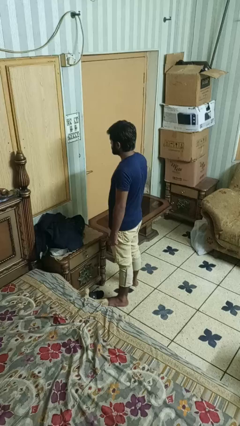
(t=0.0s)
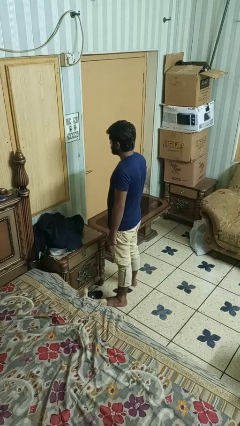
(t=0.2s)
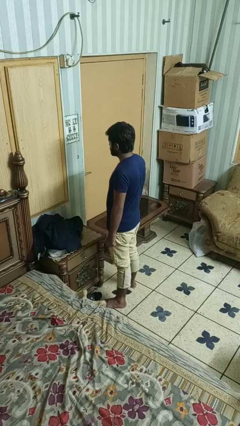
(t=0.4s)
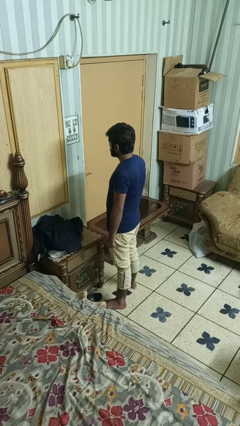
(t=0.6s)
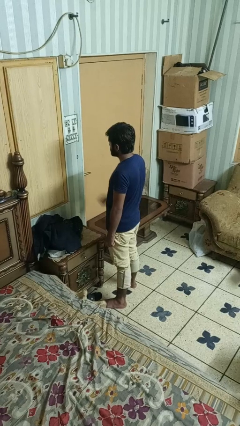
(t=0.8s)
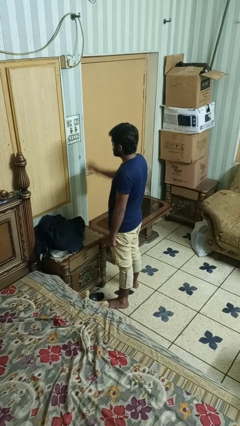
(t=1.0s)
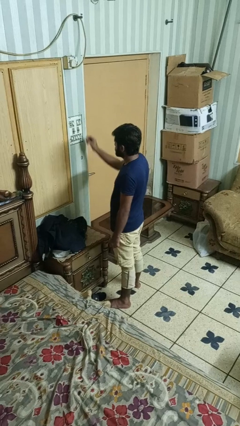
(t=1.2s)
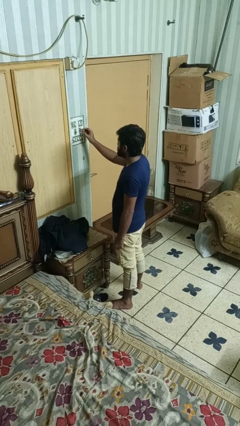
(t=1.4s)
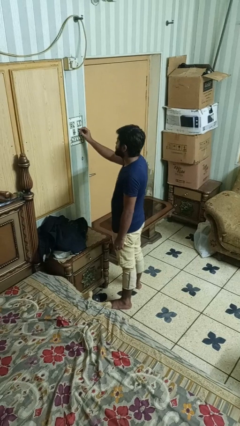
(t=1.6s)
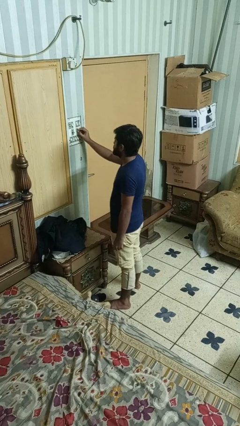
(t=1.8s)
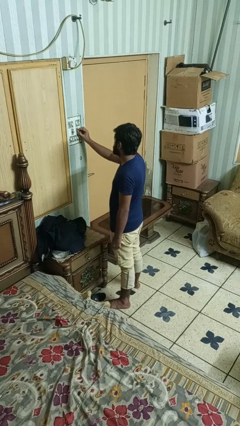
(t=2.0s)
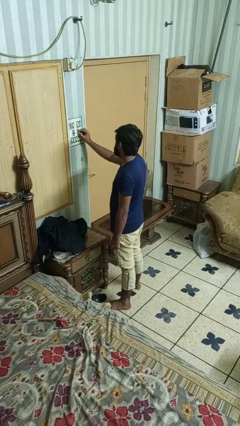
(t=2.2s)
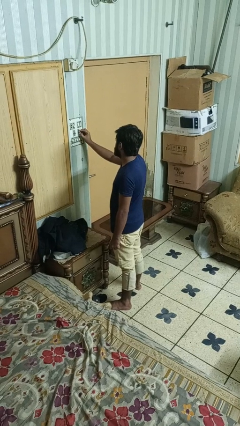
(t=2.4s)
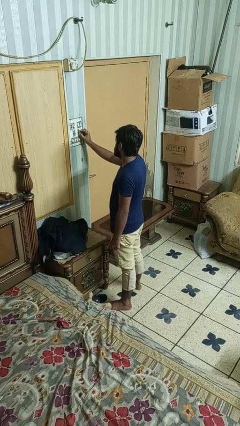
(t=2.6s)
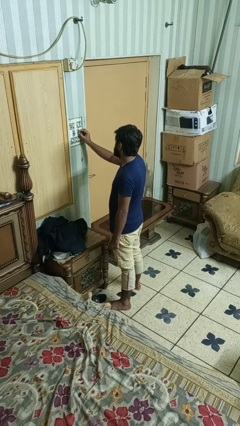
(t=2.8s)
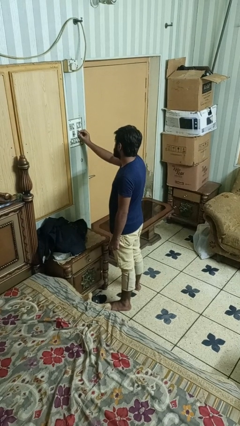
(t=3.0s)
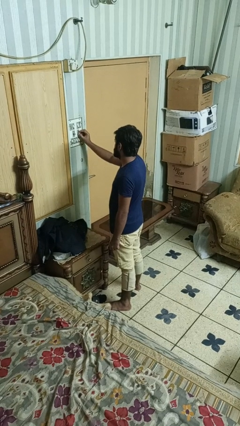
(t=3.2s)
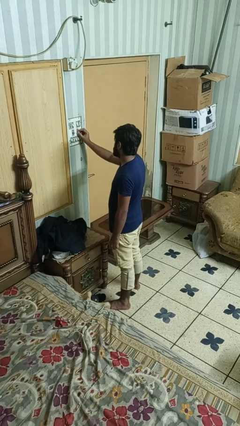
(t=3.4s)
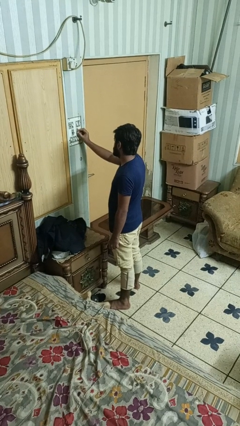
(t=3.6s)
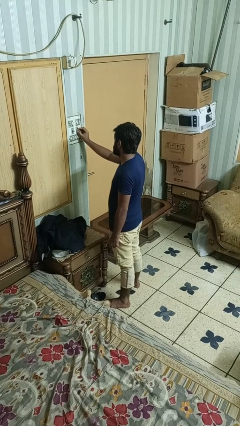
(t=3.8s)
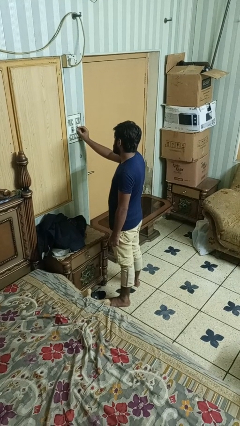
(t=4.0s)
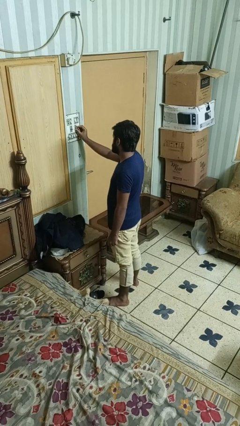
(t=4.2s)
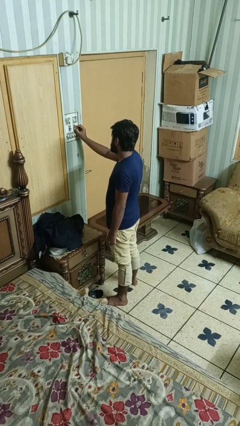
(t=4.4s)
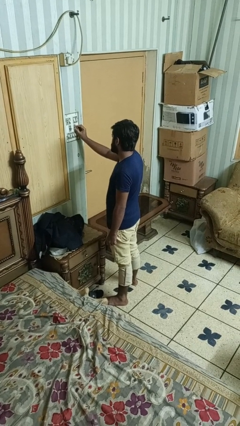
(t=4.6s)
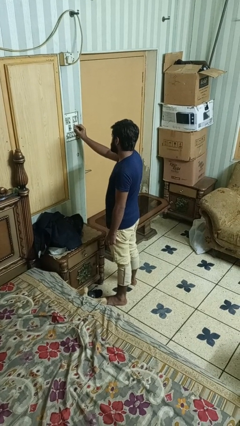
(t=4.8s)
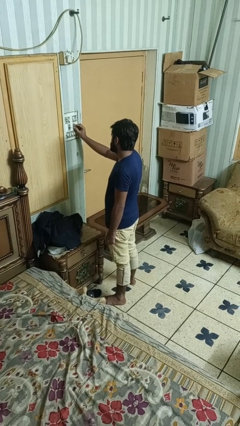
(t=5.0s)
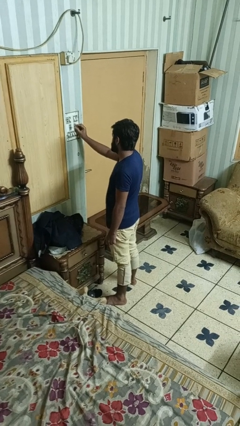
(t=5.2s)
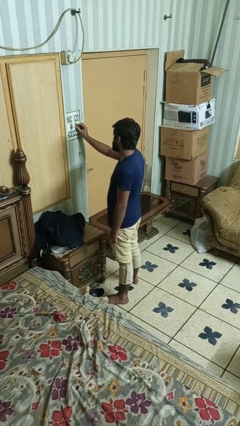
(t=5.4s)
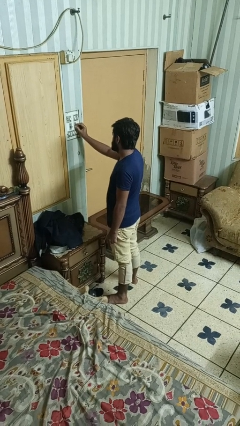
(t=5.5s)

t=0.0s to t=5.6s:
person adjusts thermostat

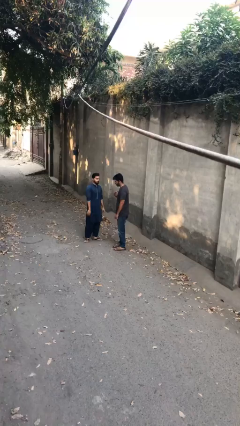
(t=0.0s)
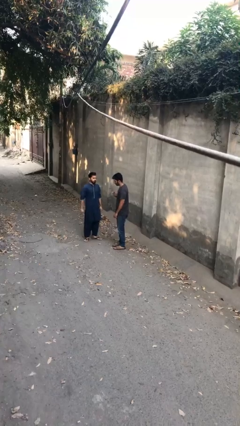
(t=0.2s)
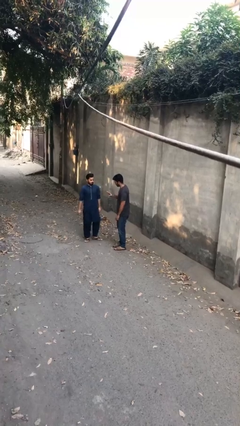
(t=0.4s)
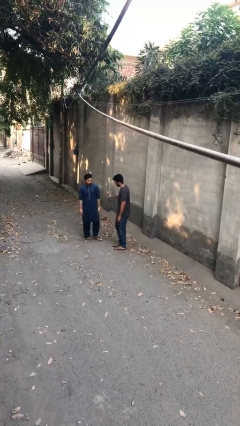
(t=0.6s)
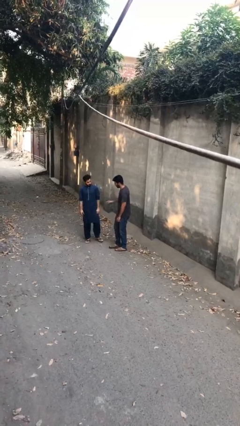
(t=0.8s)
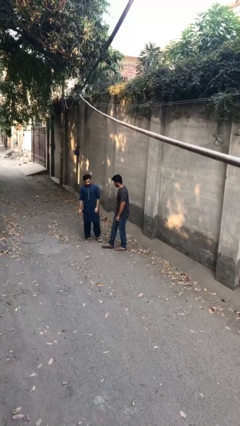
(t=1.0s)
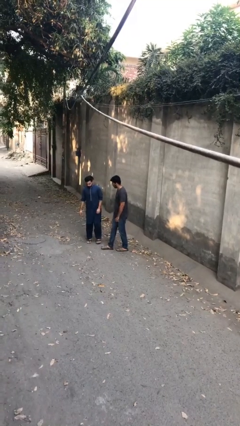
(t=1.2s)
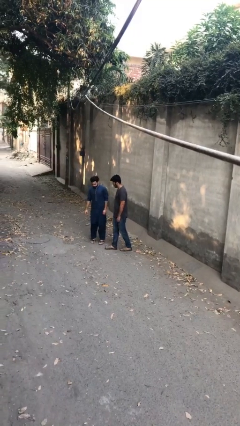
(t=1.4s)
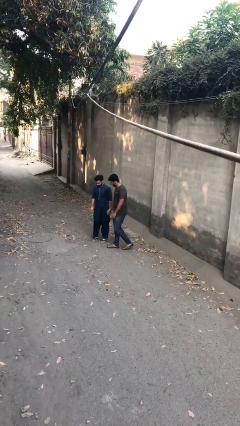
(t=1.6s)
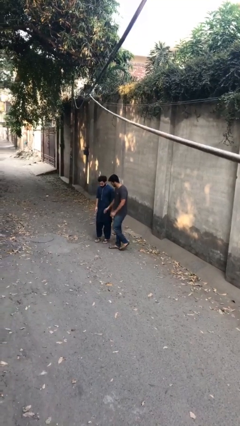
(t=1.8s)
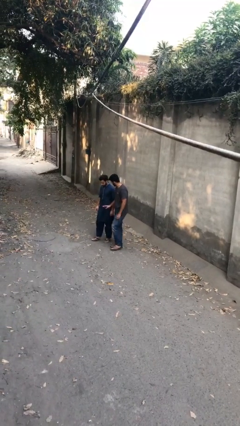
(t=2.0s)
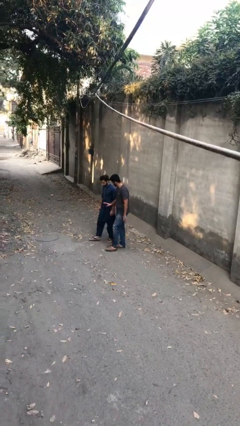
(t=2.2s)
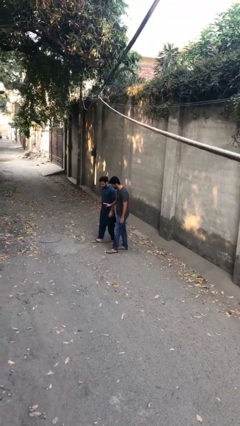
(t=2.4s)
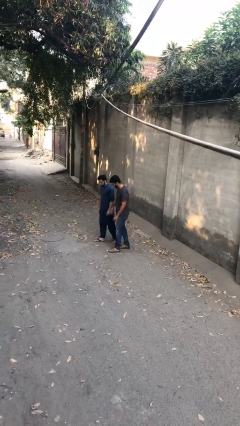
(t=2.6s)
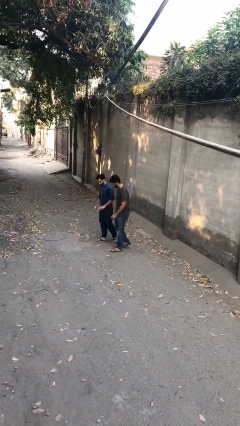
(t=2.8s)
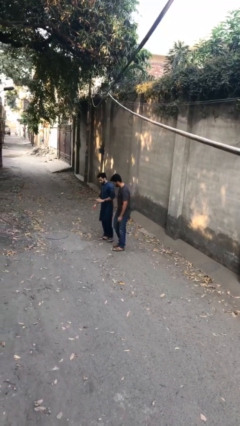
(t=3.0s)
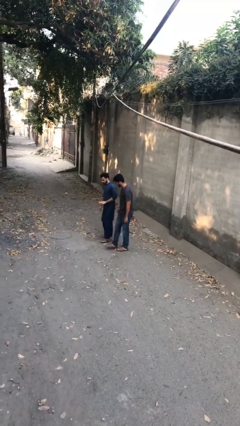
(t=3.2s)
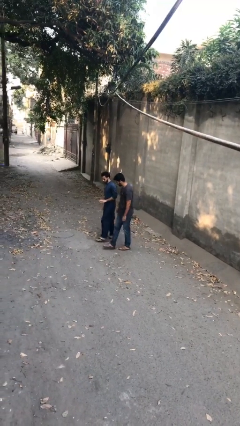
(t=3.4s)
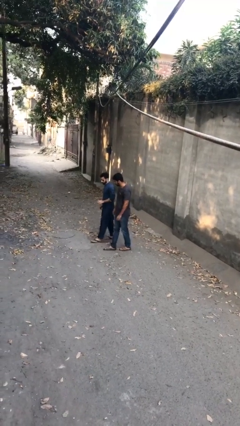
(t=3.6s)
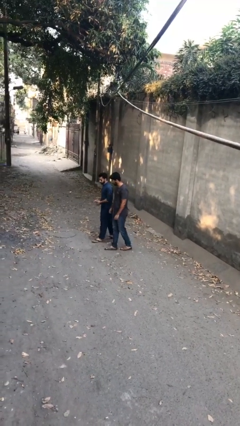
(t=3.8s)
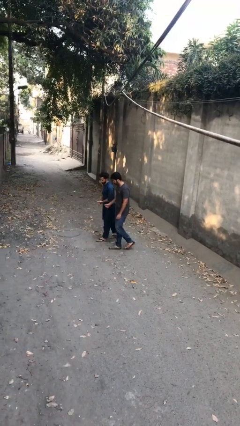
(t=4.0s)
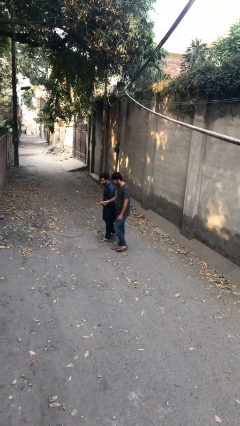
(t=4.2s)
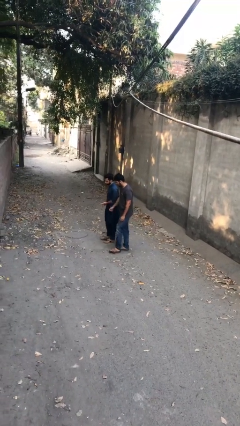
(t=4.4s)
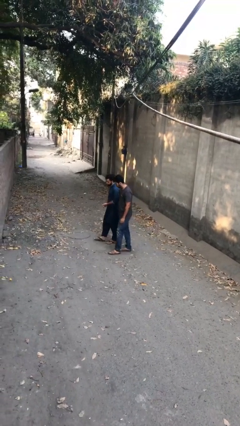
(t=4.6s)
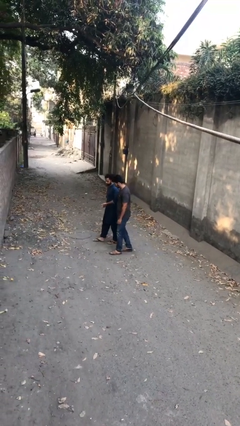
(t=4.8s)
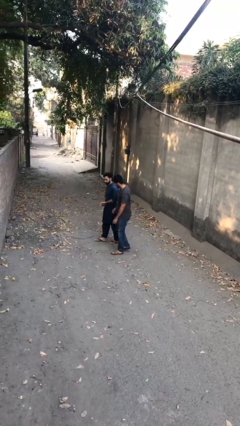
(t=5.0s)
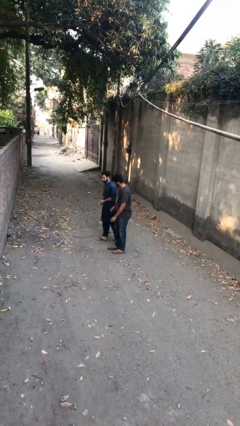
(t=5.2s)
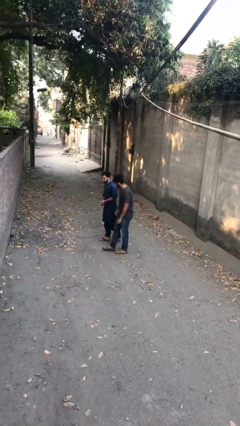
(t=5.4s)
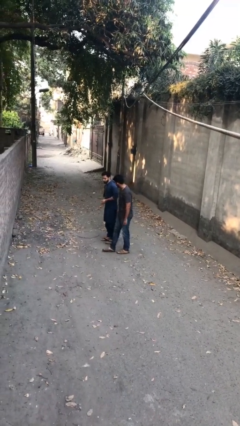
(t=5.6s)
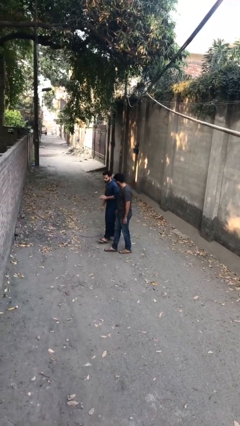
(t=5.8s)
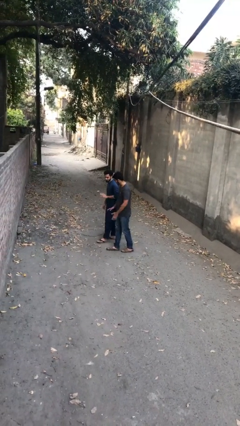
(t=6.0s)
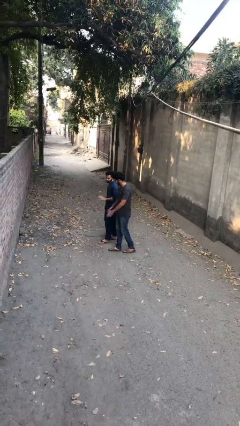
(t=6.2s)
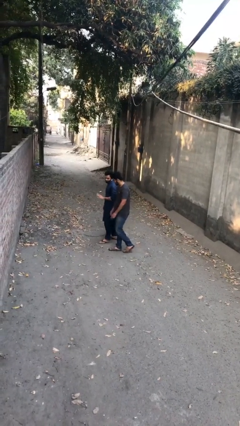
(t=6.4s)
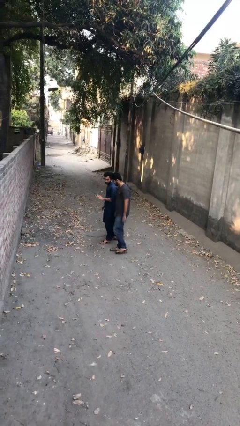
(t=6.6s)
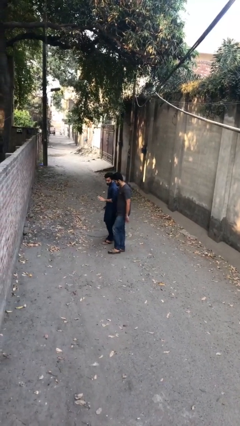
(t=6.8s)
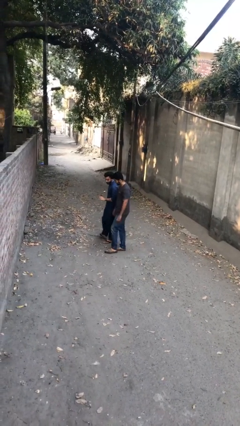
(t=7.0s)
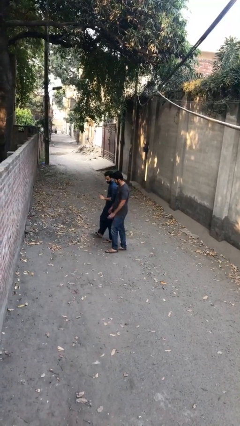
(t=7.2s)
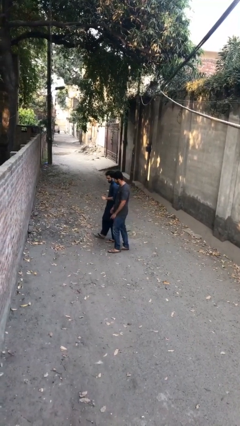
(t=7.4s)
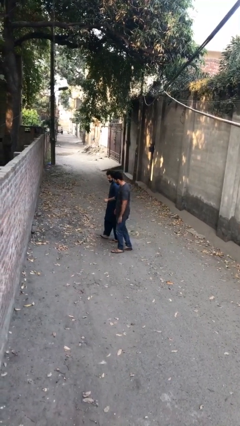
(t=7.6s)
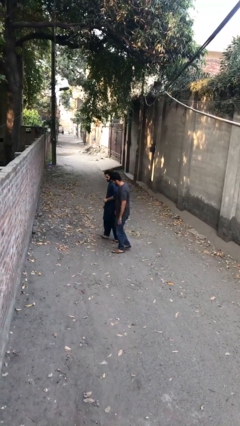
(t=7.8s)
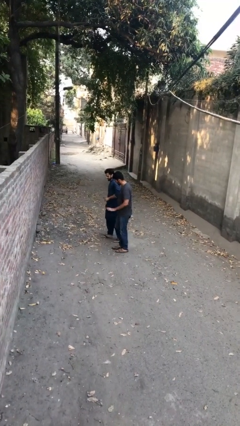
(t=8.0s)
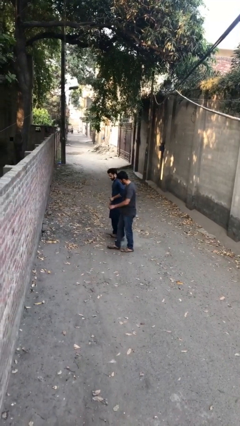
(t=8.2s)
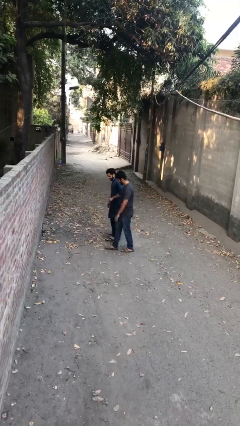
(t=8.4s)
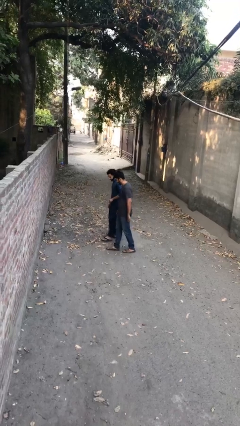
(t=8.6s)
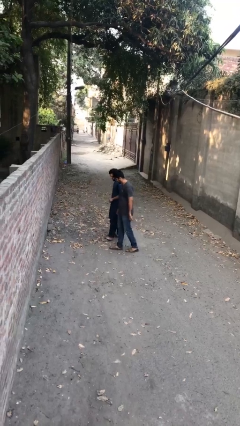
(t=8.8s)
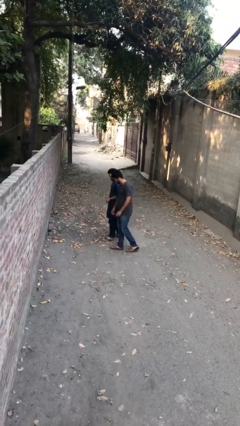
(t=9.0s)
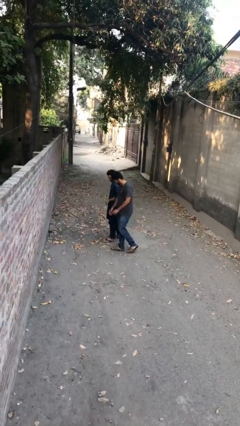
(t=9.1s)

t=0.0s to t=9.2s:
person talks to person

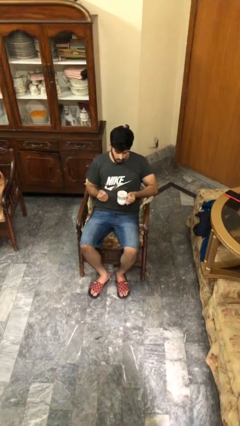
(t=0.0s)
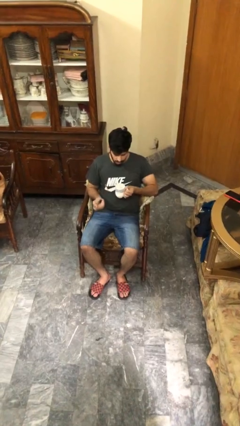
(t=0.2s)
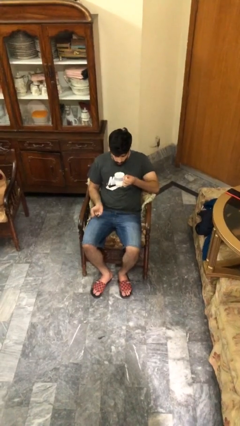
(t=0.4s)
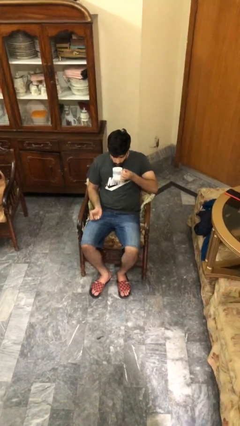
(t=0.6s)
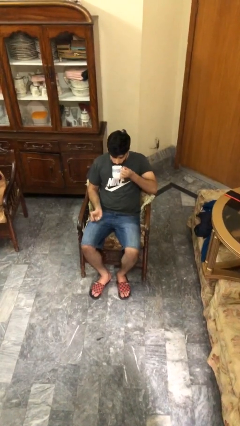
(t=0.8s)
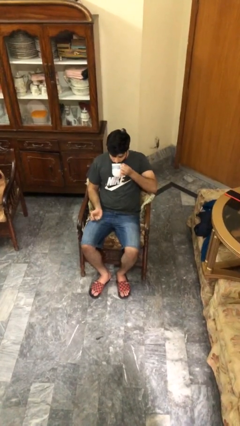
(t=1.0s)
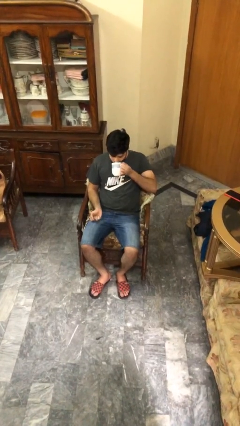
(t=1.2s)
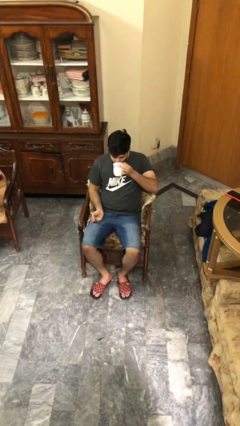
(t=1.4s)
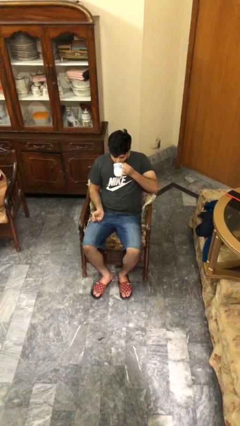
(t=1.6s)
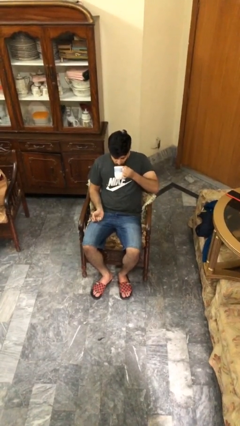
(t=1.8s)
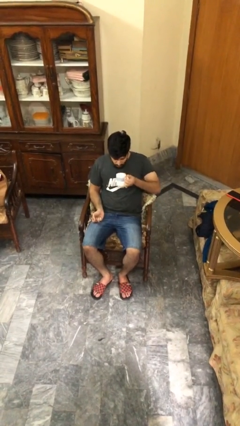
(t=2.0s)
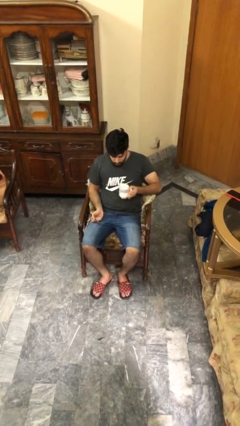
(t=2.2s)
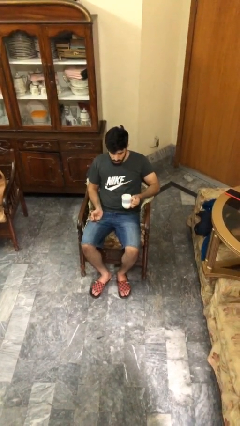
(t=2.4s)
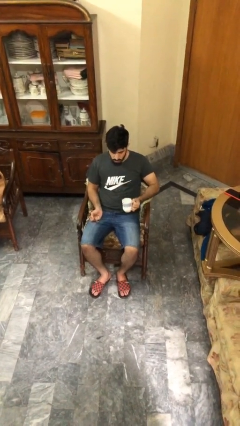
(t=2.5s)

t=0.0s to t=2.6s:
person drinks from mug
